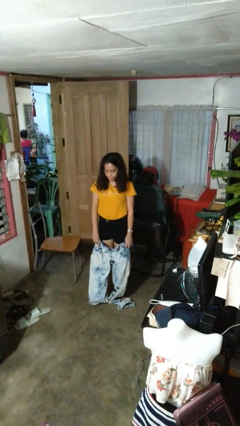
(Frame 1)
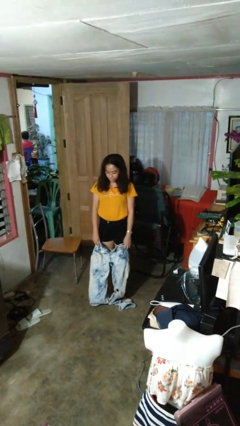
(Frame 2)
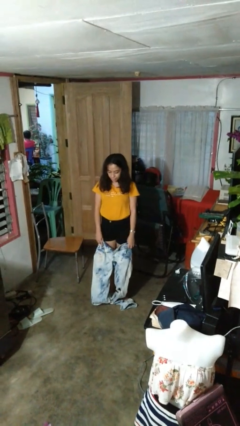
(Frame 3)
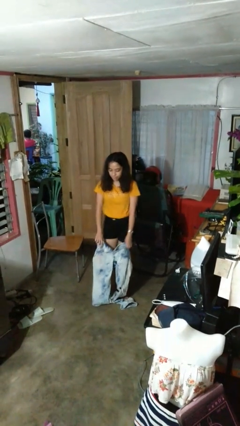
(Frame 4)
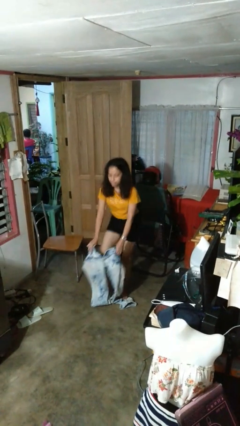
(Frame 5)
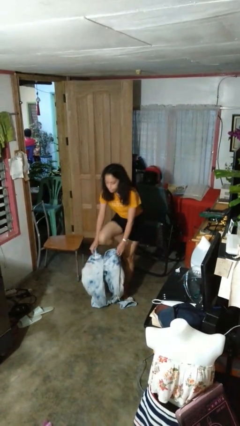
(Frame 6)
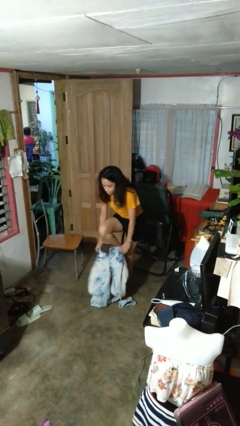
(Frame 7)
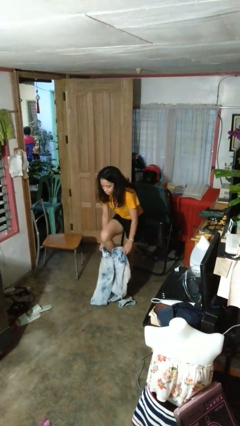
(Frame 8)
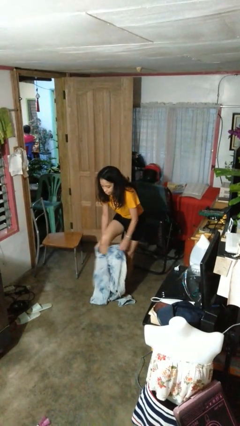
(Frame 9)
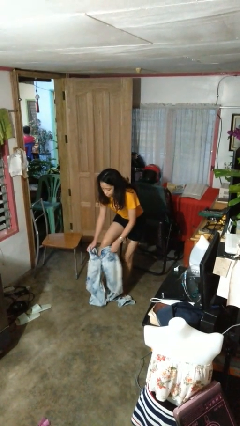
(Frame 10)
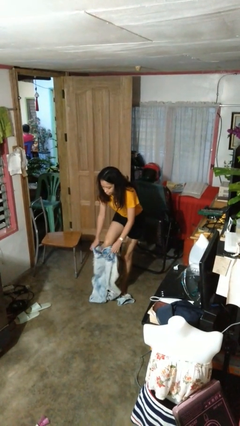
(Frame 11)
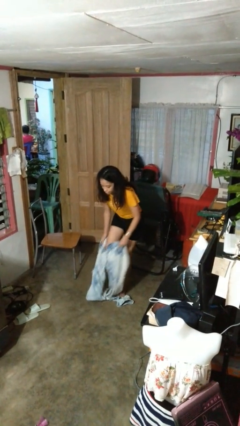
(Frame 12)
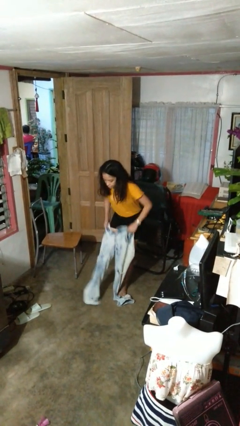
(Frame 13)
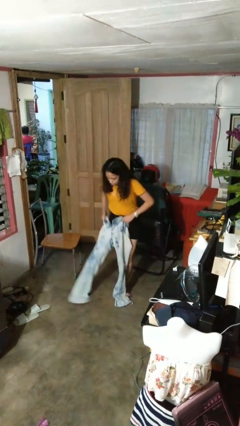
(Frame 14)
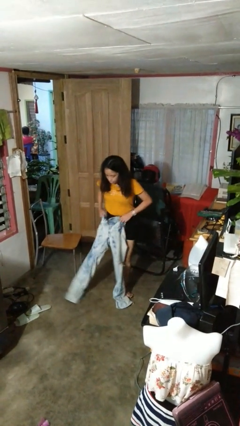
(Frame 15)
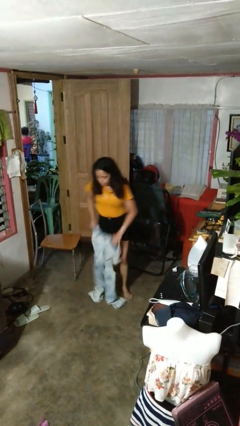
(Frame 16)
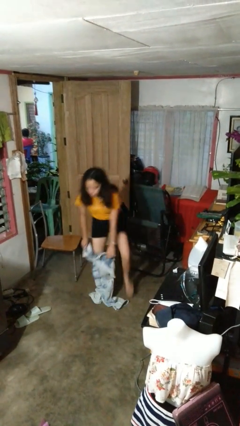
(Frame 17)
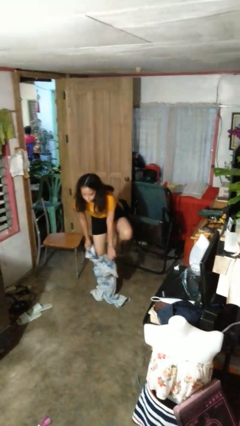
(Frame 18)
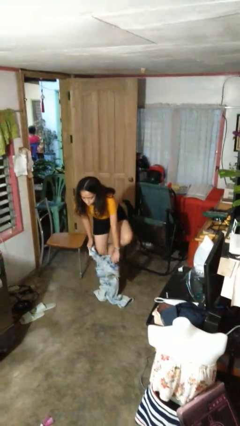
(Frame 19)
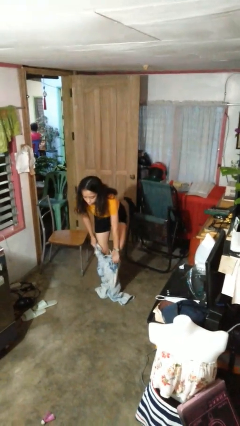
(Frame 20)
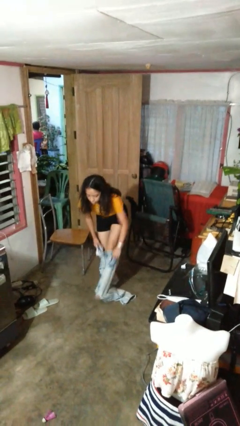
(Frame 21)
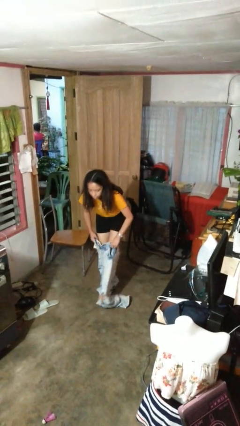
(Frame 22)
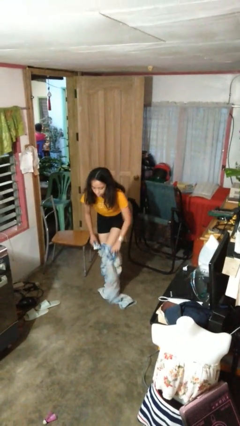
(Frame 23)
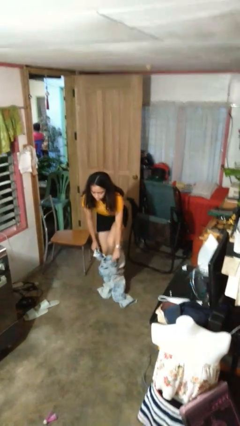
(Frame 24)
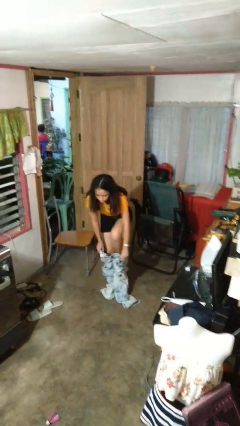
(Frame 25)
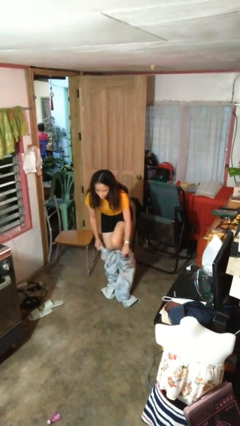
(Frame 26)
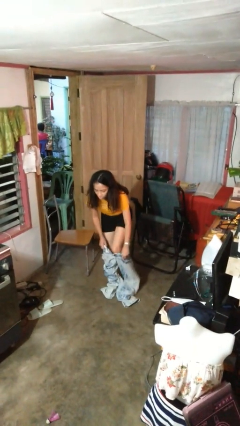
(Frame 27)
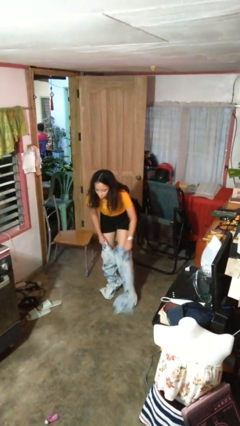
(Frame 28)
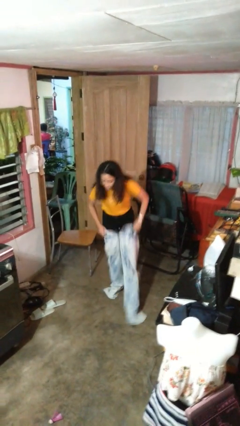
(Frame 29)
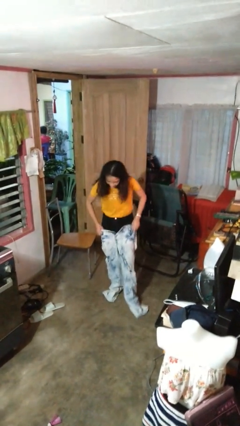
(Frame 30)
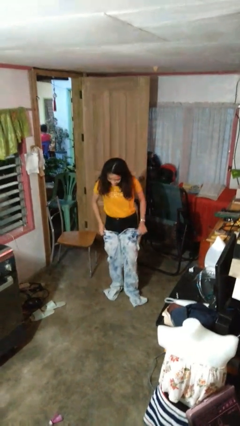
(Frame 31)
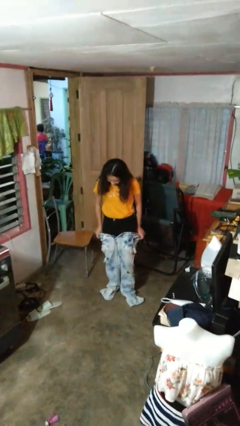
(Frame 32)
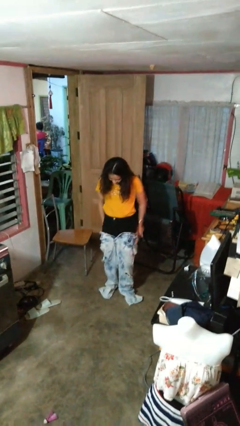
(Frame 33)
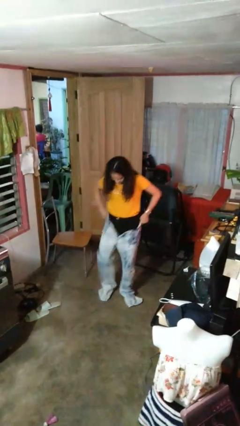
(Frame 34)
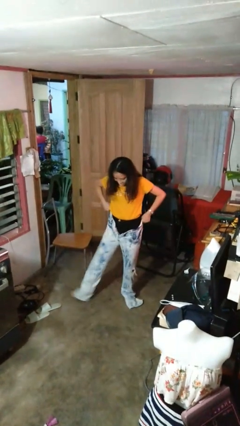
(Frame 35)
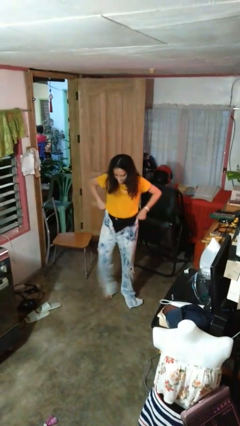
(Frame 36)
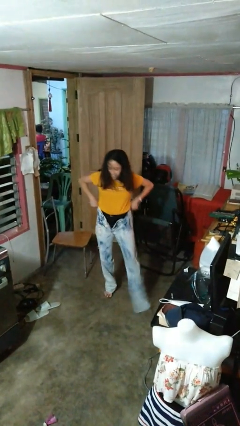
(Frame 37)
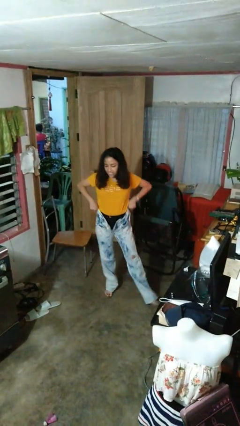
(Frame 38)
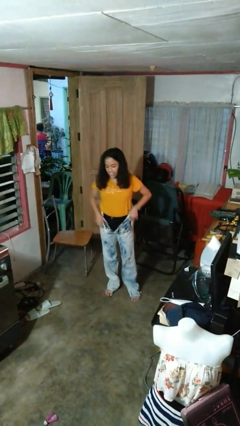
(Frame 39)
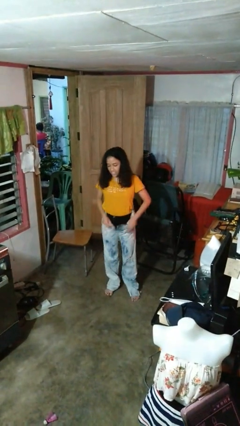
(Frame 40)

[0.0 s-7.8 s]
person puts on pants

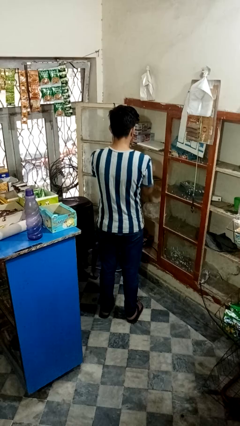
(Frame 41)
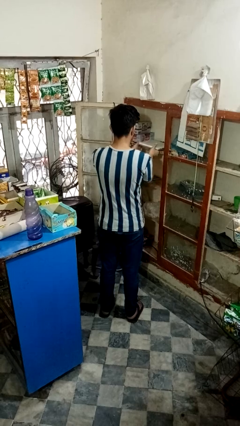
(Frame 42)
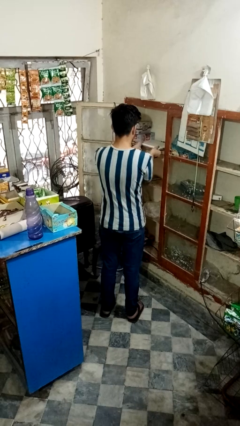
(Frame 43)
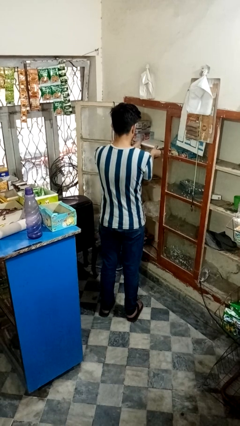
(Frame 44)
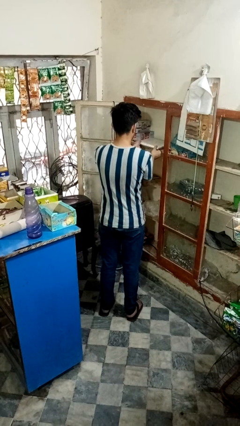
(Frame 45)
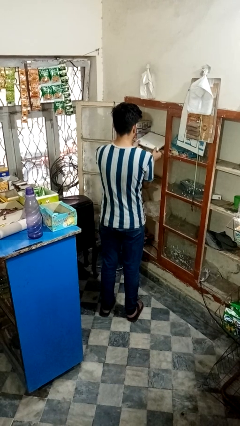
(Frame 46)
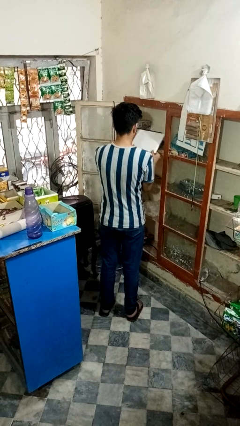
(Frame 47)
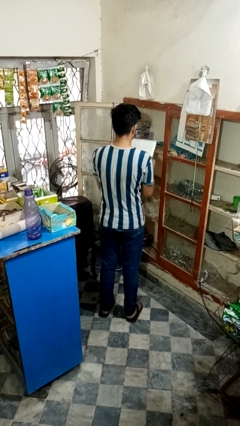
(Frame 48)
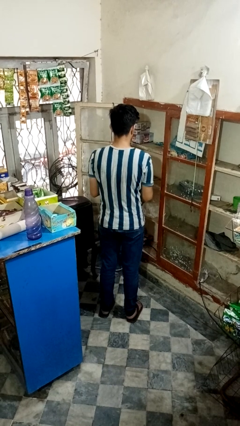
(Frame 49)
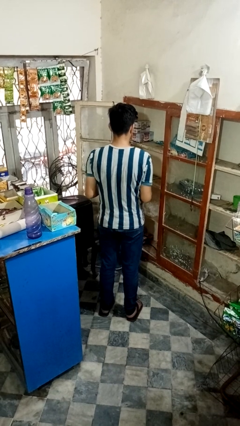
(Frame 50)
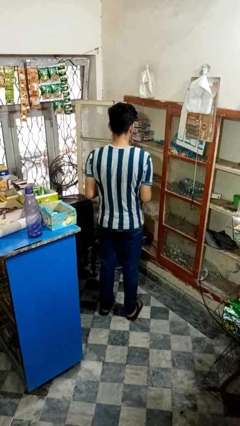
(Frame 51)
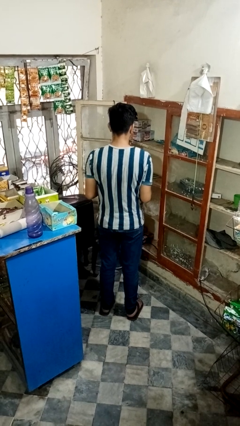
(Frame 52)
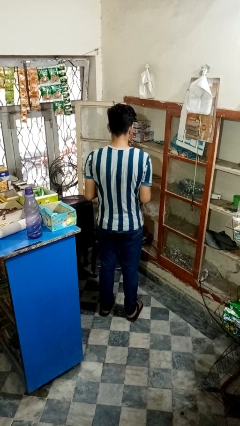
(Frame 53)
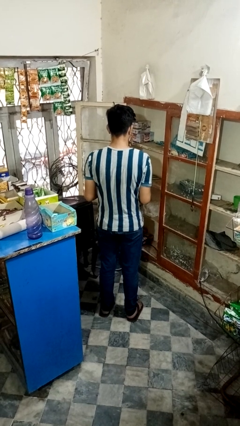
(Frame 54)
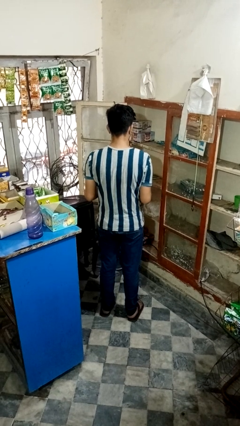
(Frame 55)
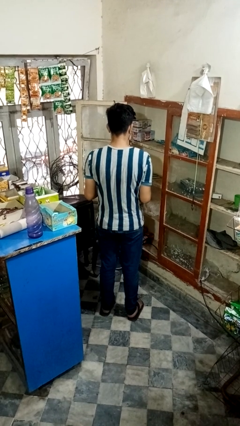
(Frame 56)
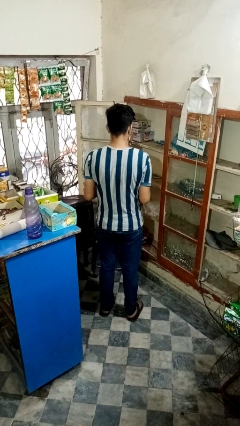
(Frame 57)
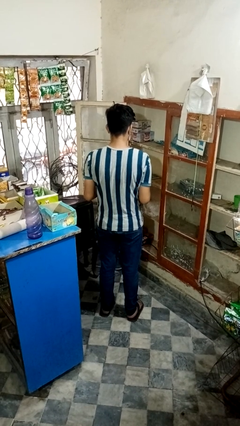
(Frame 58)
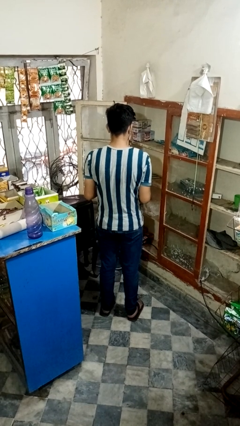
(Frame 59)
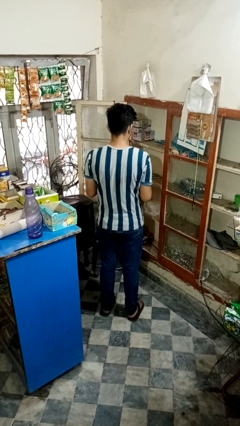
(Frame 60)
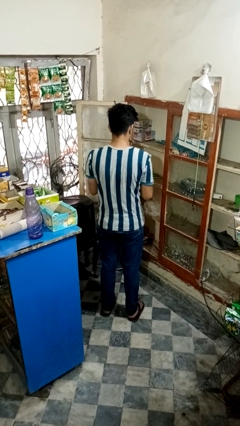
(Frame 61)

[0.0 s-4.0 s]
person picks up object from cabinet

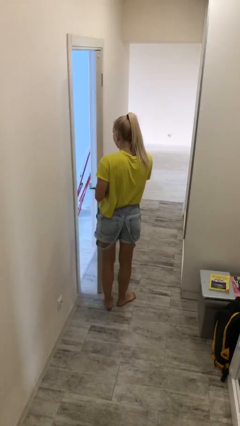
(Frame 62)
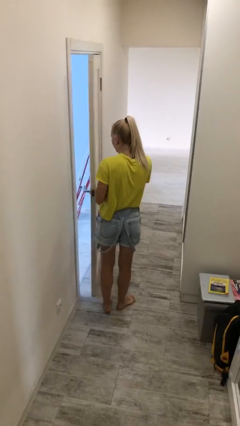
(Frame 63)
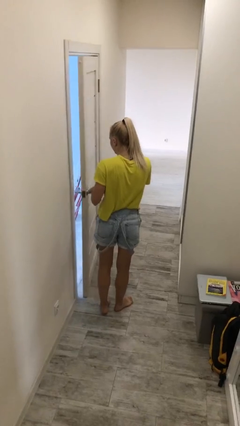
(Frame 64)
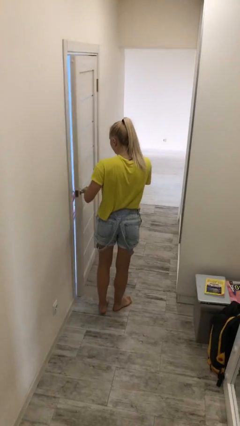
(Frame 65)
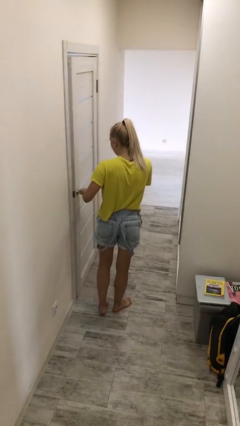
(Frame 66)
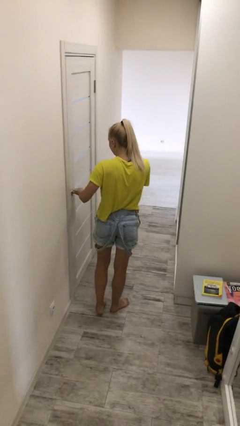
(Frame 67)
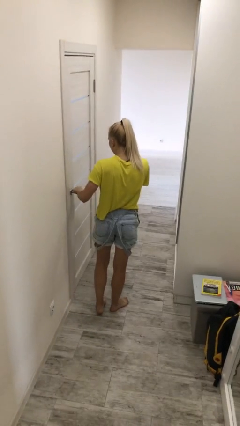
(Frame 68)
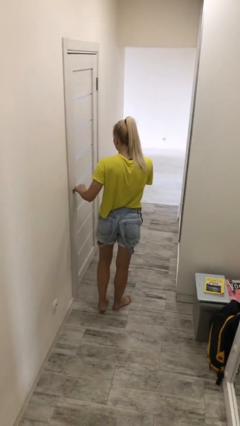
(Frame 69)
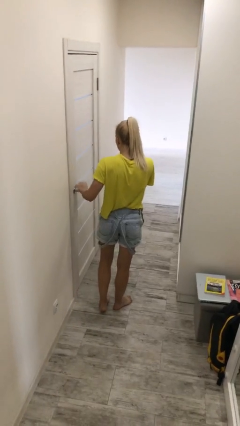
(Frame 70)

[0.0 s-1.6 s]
person closes facility door

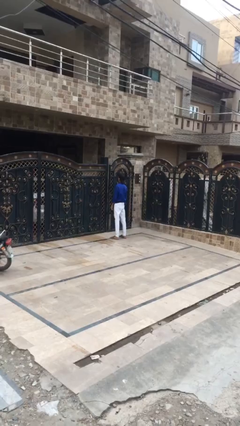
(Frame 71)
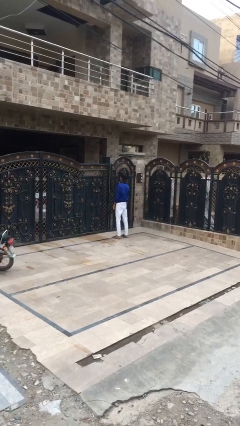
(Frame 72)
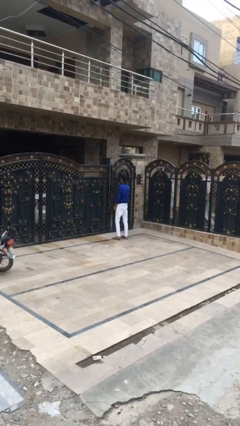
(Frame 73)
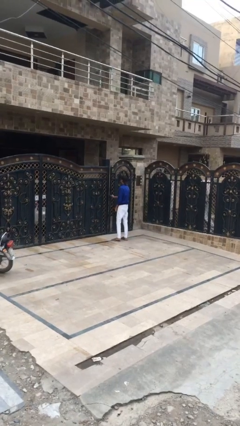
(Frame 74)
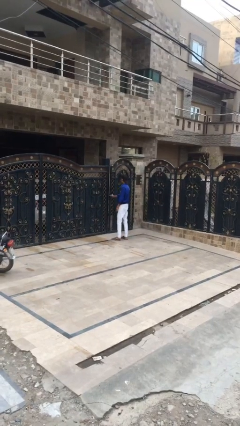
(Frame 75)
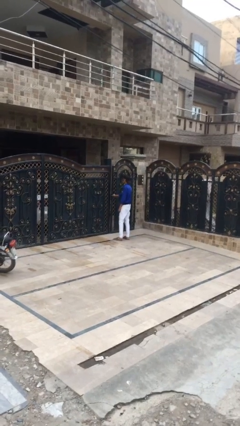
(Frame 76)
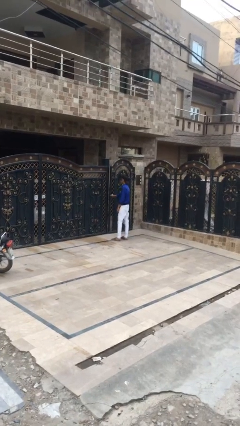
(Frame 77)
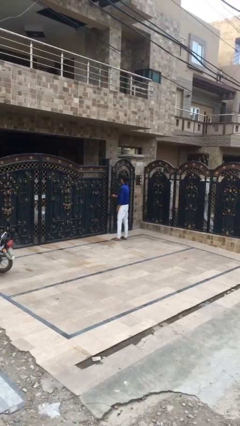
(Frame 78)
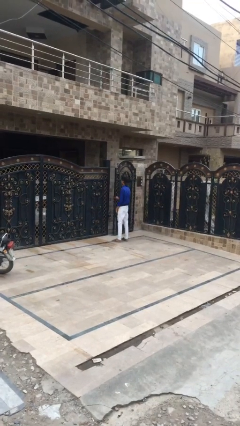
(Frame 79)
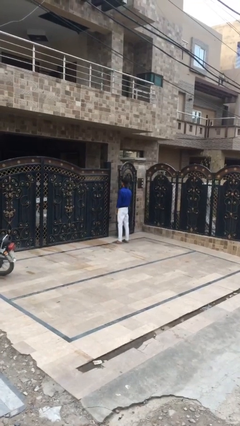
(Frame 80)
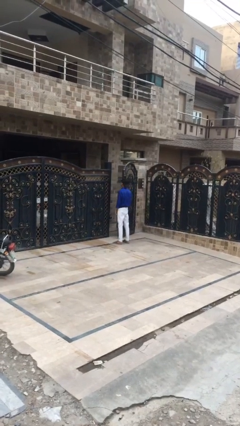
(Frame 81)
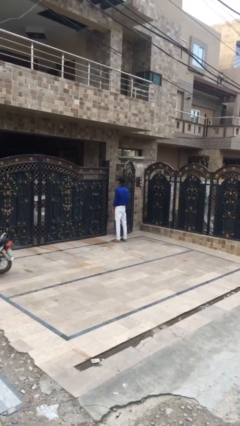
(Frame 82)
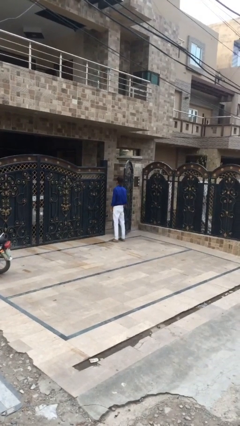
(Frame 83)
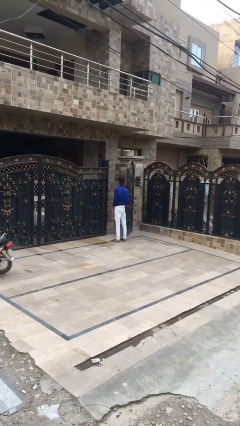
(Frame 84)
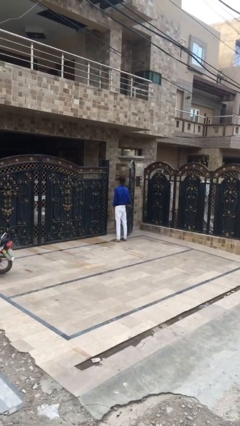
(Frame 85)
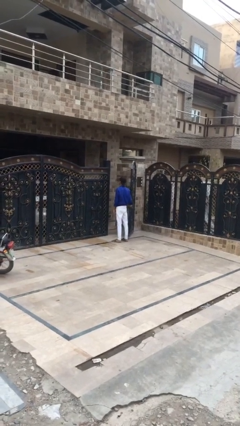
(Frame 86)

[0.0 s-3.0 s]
person opens facility door

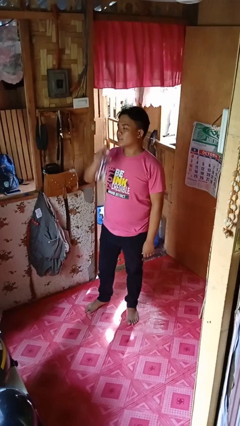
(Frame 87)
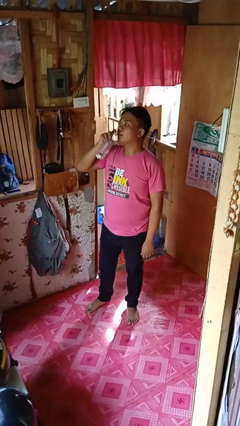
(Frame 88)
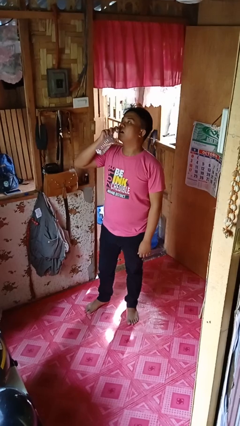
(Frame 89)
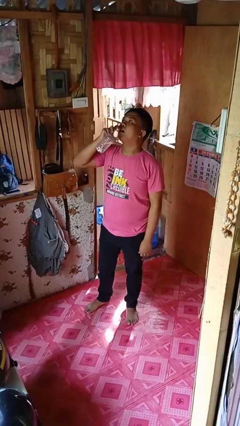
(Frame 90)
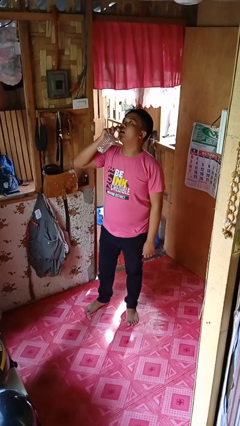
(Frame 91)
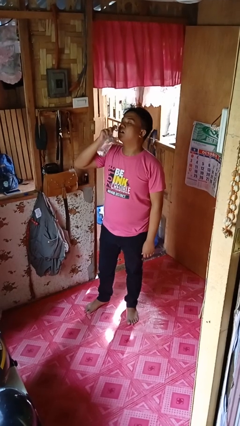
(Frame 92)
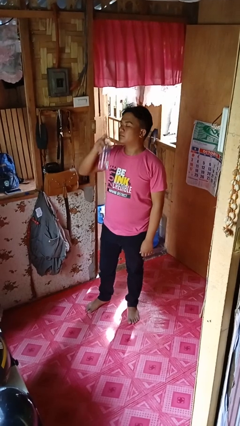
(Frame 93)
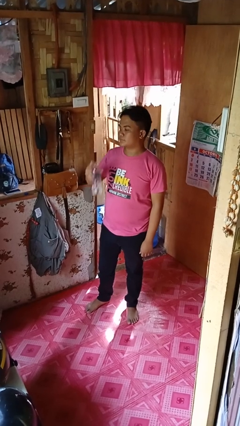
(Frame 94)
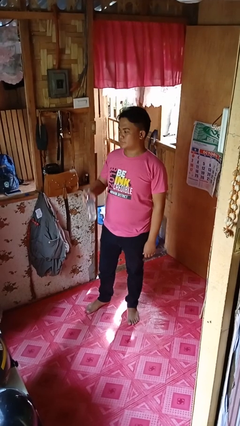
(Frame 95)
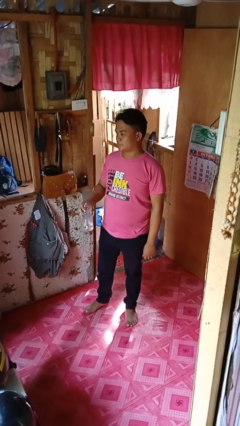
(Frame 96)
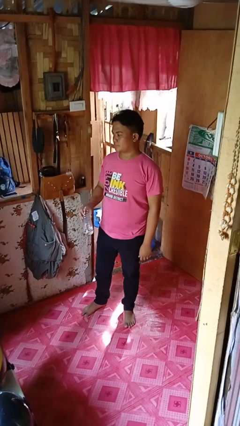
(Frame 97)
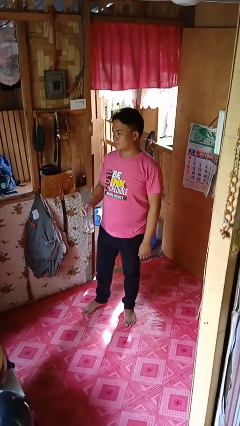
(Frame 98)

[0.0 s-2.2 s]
person drinks from bottle
